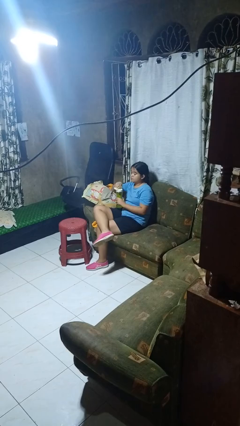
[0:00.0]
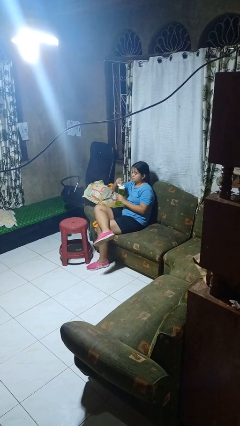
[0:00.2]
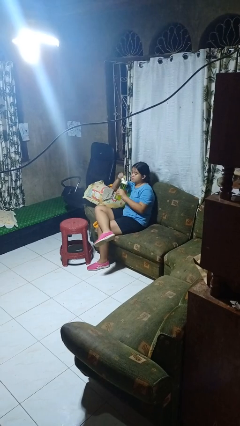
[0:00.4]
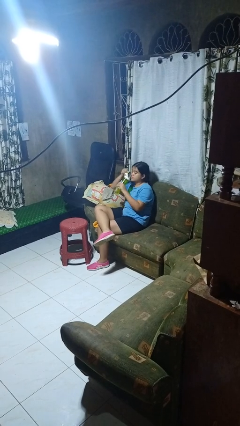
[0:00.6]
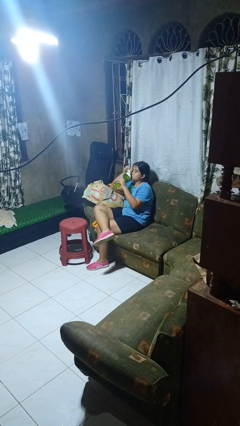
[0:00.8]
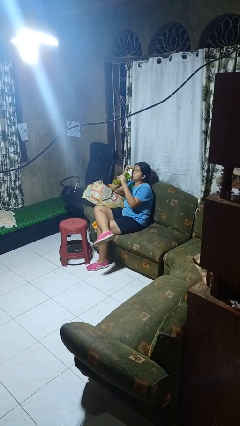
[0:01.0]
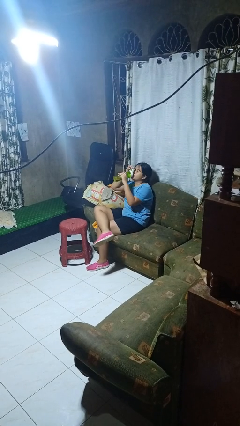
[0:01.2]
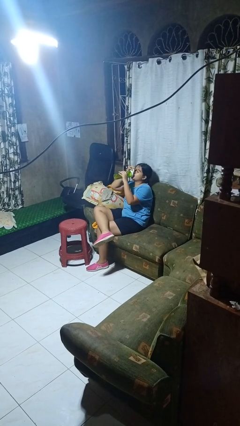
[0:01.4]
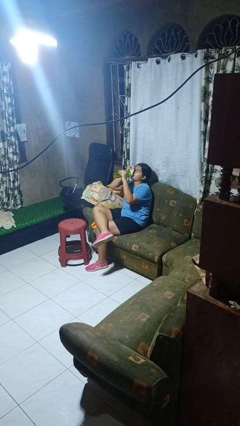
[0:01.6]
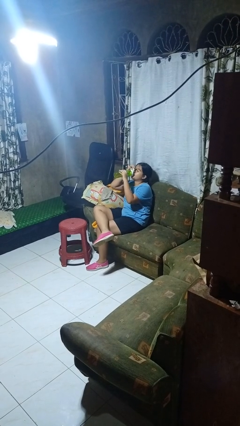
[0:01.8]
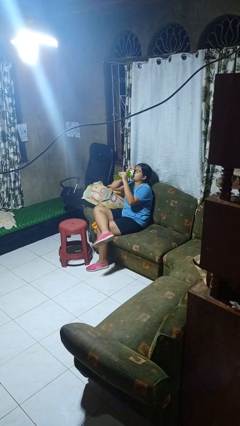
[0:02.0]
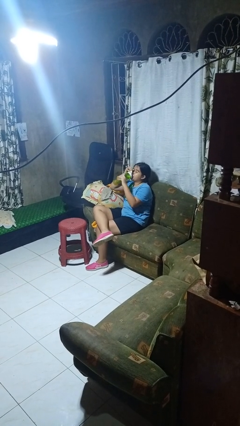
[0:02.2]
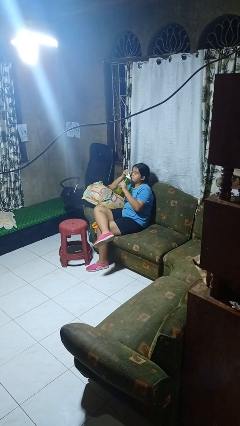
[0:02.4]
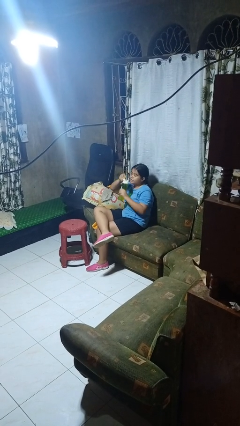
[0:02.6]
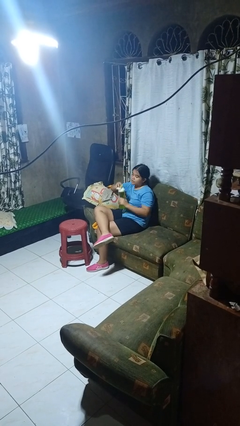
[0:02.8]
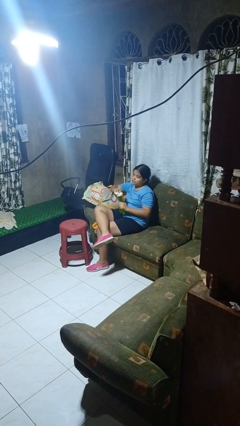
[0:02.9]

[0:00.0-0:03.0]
person drinks from bottle

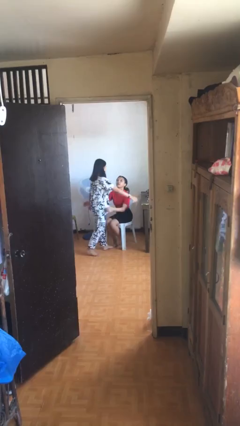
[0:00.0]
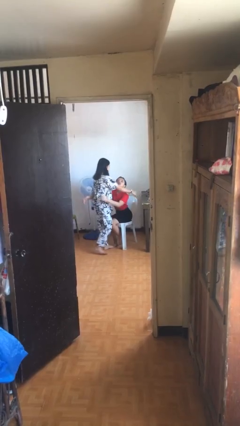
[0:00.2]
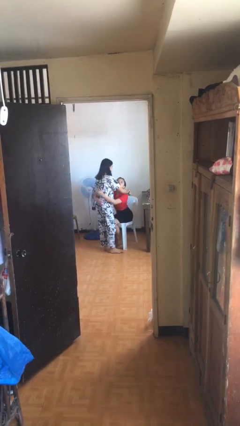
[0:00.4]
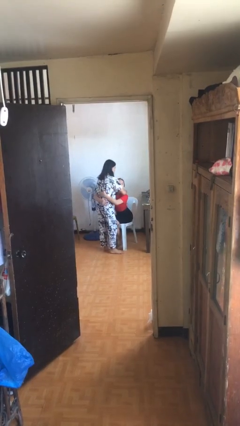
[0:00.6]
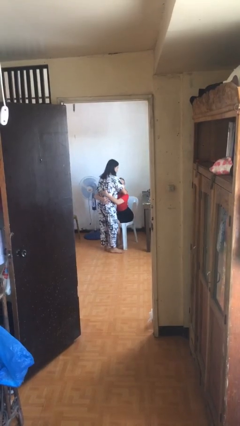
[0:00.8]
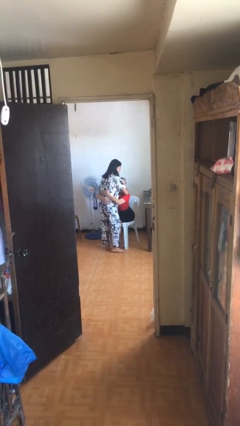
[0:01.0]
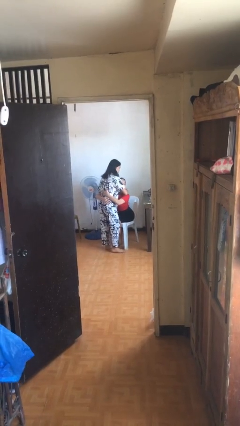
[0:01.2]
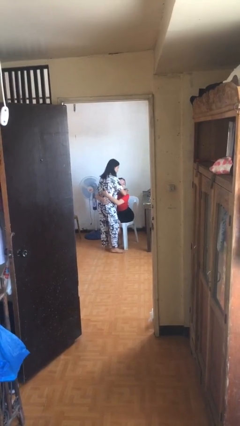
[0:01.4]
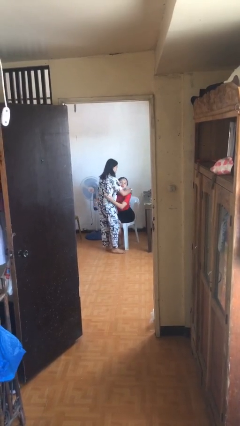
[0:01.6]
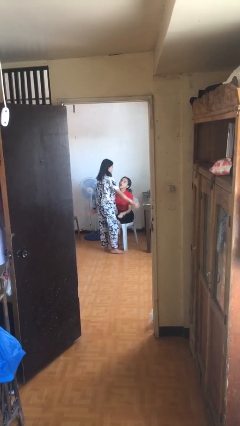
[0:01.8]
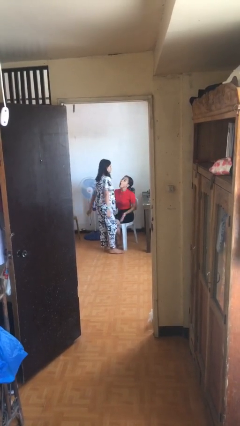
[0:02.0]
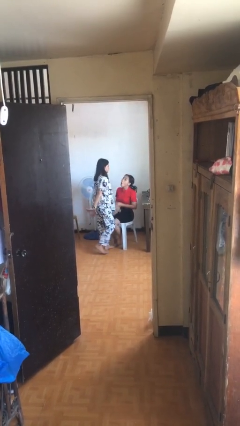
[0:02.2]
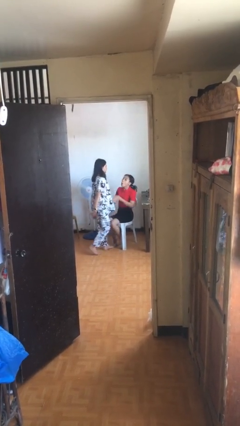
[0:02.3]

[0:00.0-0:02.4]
person embraces person

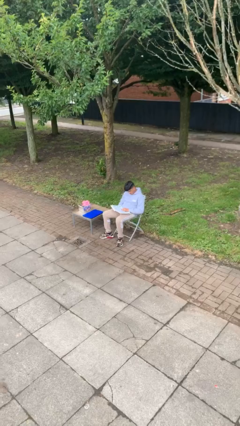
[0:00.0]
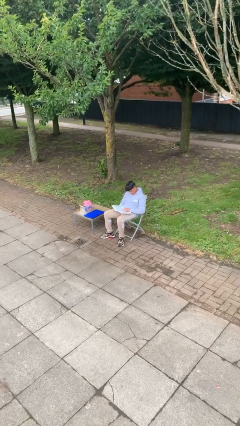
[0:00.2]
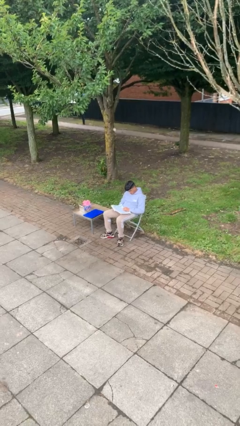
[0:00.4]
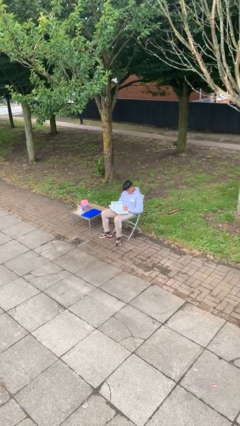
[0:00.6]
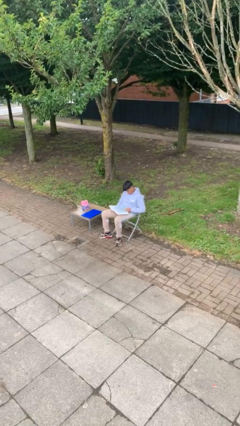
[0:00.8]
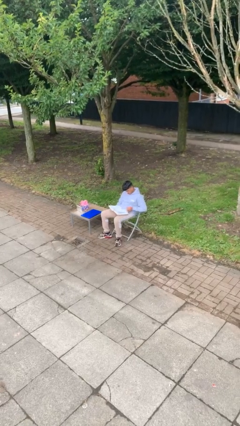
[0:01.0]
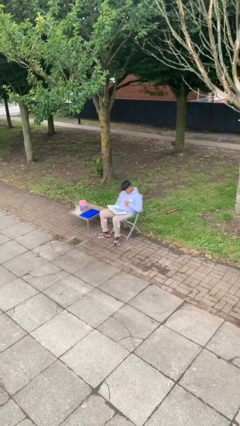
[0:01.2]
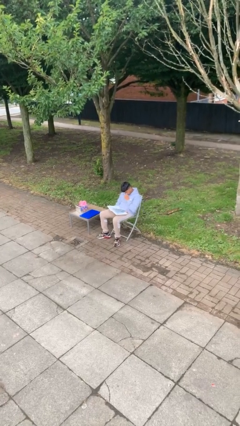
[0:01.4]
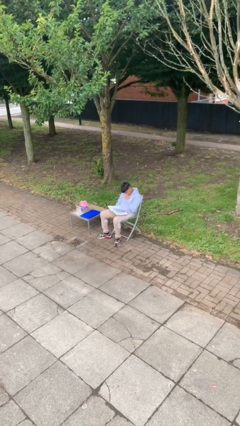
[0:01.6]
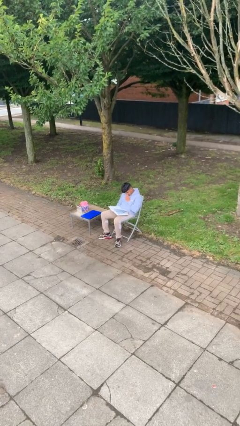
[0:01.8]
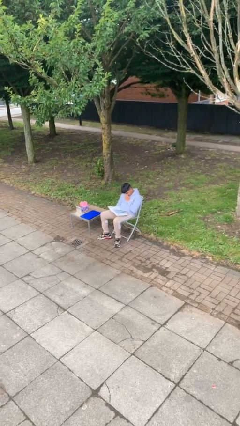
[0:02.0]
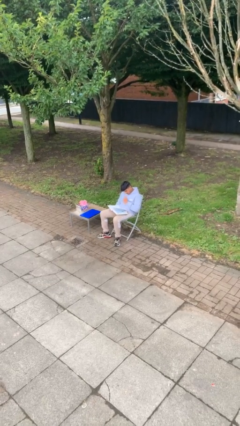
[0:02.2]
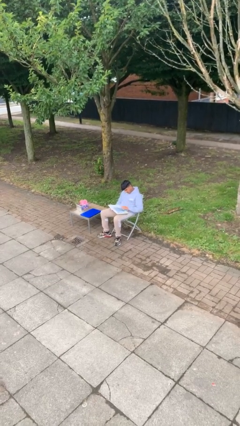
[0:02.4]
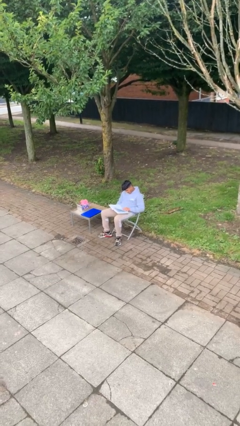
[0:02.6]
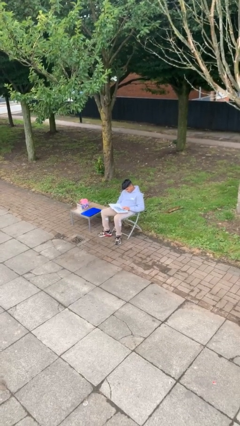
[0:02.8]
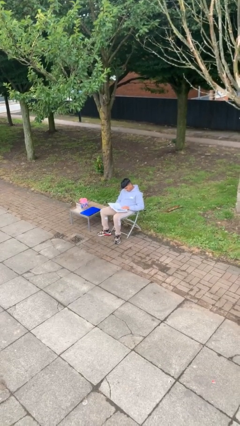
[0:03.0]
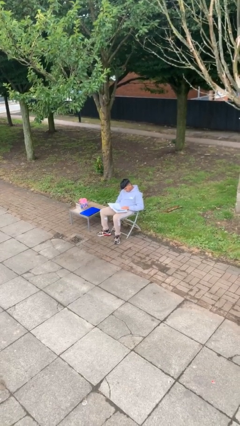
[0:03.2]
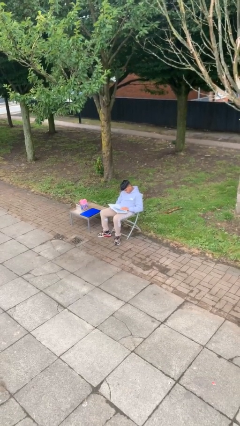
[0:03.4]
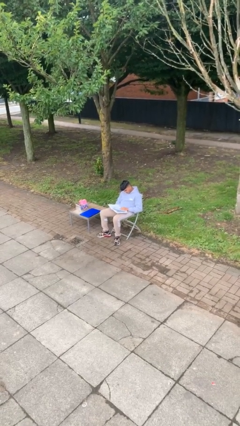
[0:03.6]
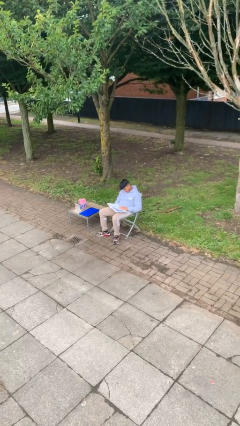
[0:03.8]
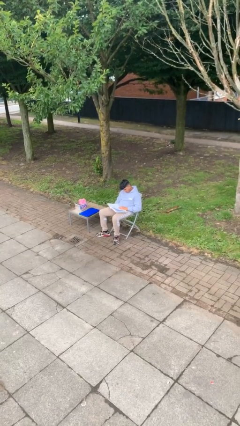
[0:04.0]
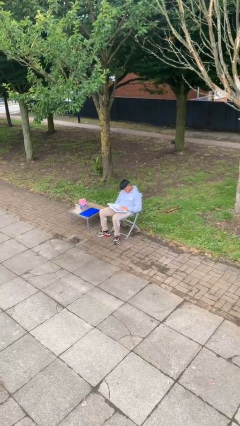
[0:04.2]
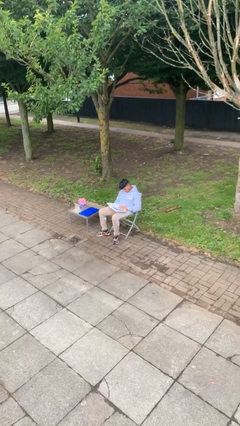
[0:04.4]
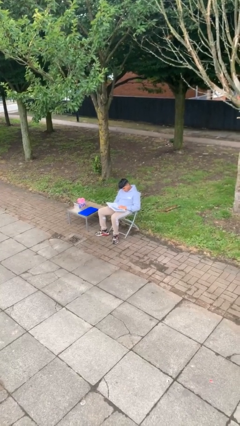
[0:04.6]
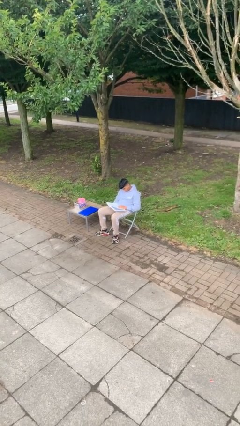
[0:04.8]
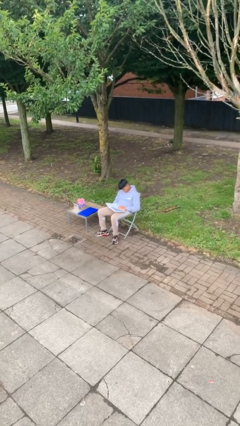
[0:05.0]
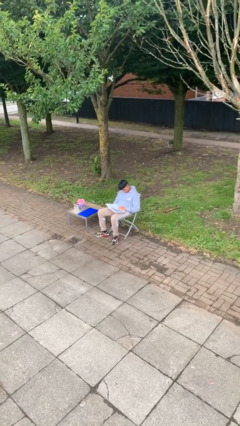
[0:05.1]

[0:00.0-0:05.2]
person reads document

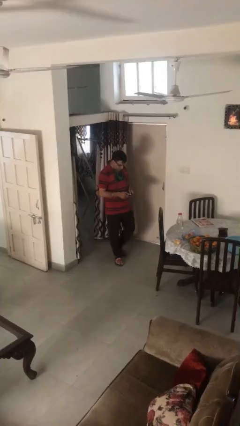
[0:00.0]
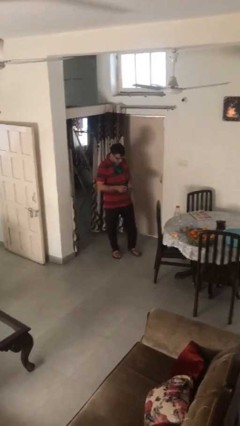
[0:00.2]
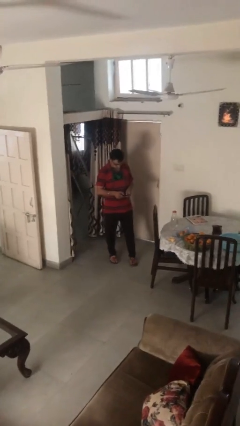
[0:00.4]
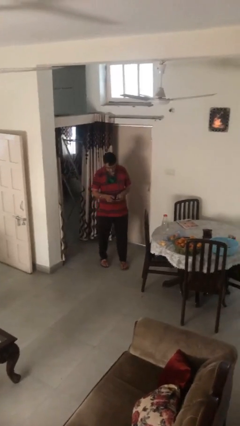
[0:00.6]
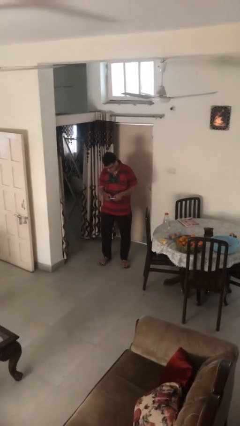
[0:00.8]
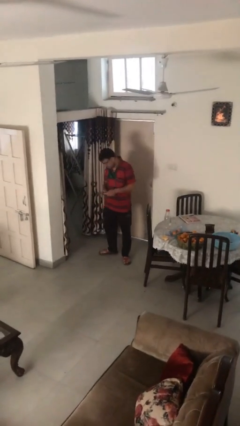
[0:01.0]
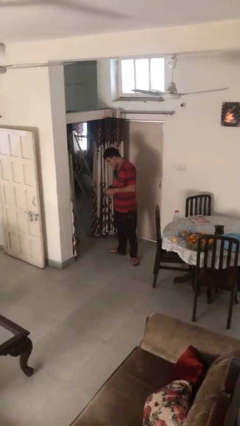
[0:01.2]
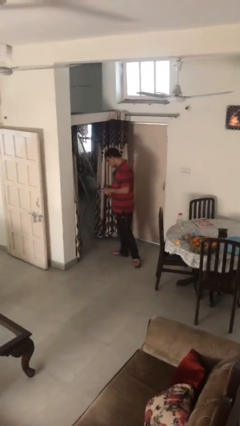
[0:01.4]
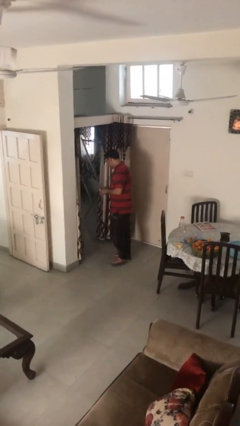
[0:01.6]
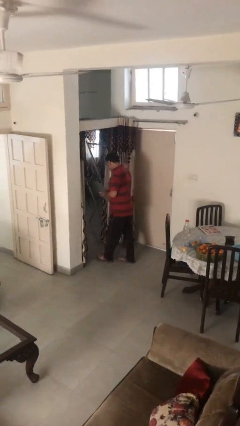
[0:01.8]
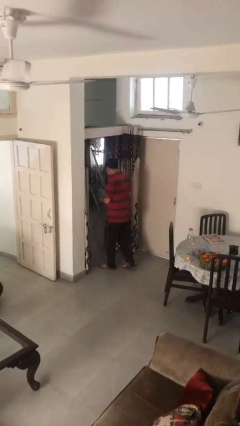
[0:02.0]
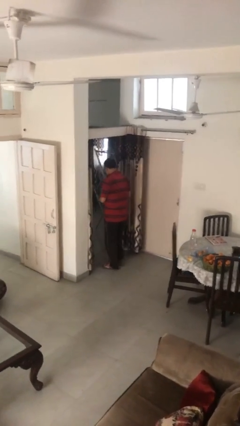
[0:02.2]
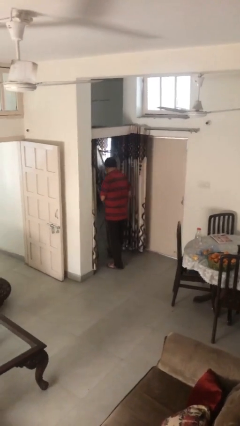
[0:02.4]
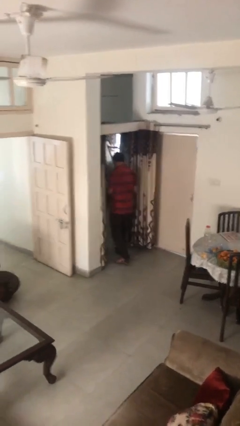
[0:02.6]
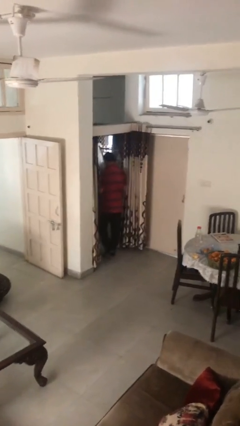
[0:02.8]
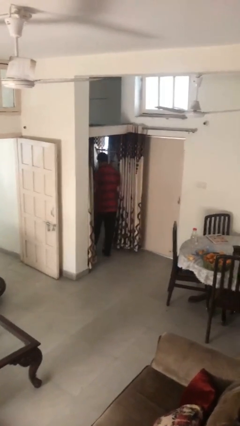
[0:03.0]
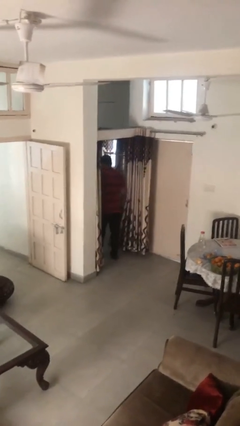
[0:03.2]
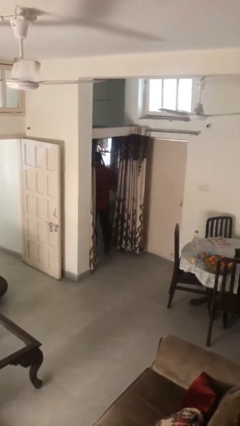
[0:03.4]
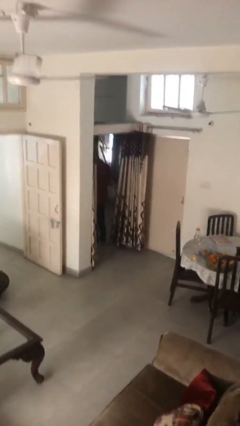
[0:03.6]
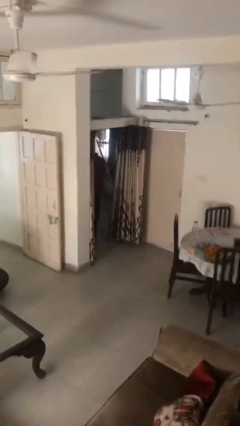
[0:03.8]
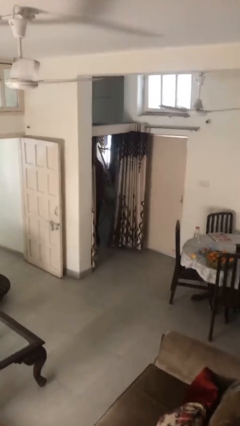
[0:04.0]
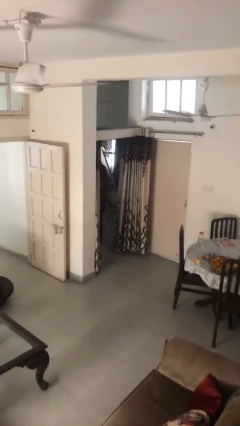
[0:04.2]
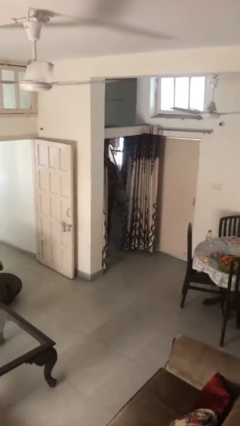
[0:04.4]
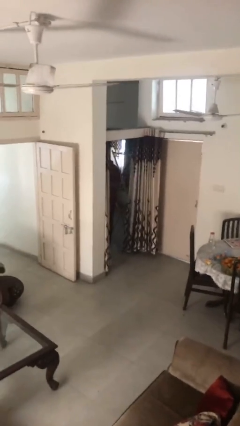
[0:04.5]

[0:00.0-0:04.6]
person exits scene through structure

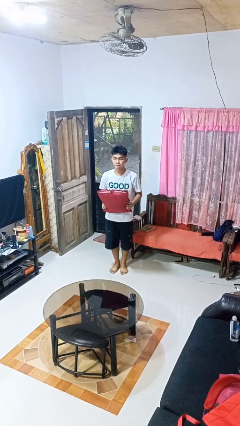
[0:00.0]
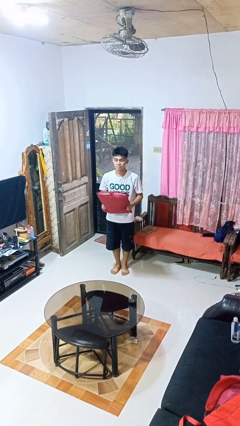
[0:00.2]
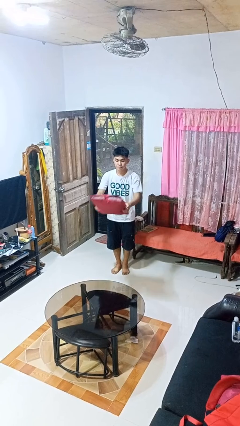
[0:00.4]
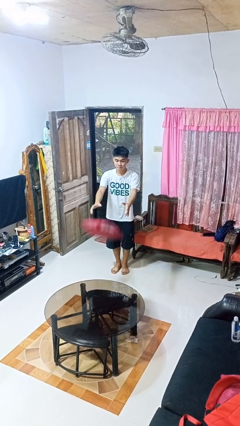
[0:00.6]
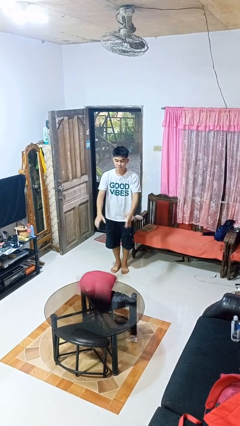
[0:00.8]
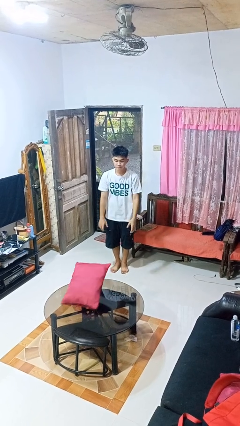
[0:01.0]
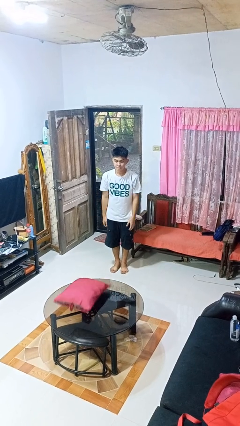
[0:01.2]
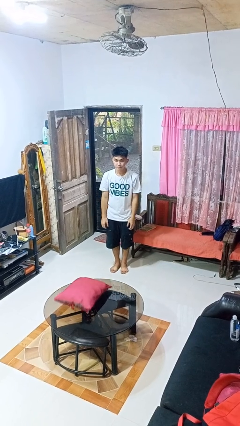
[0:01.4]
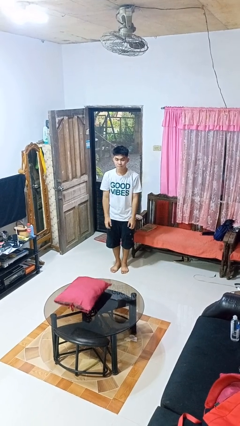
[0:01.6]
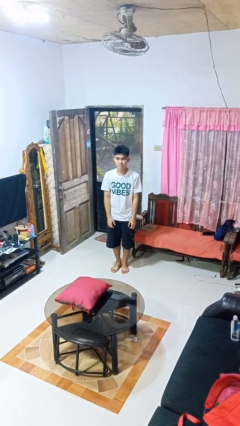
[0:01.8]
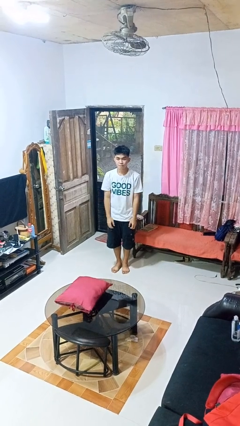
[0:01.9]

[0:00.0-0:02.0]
person throws object on table
